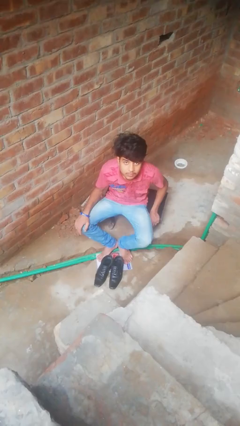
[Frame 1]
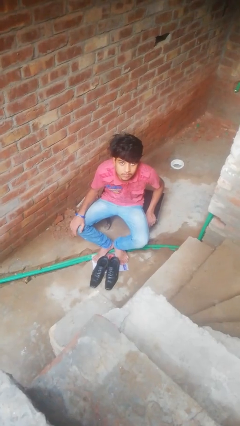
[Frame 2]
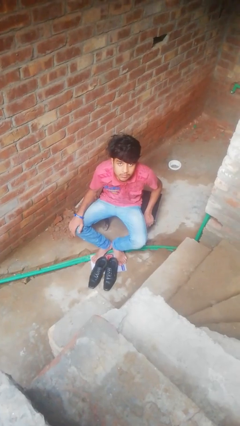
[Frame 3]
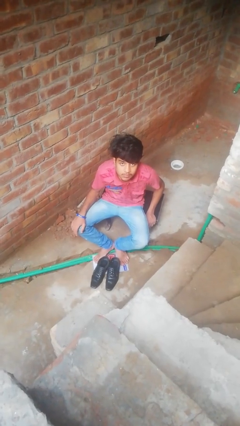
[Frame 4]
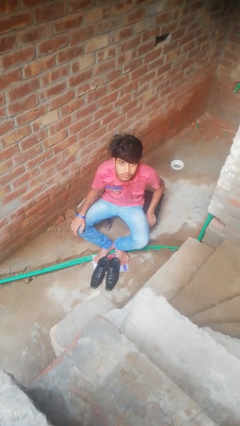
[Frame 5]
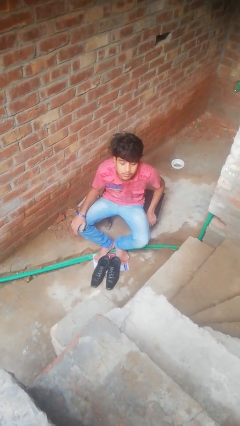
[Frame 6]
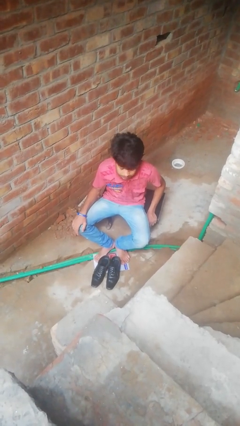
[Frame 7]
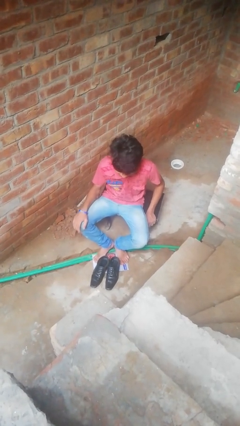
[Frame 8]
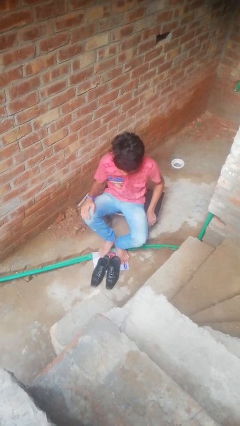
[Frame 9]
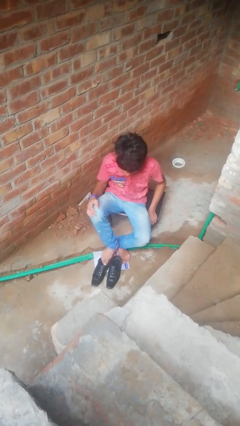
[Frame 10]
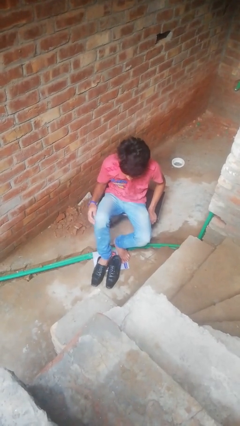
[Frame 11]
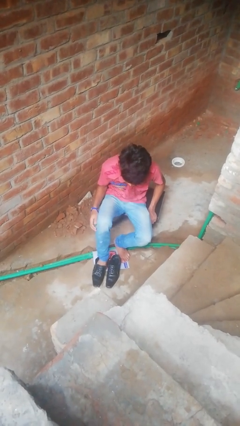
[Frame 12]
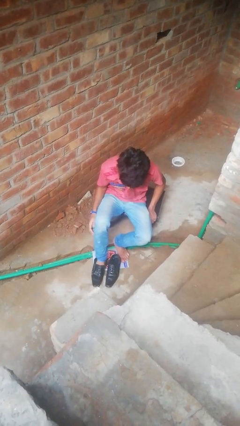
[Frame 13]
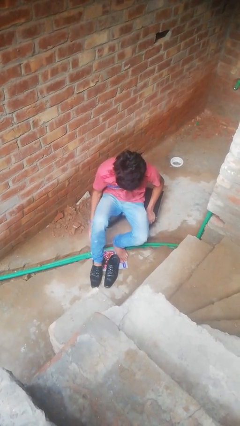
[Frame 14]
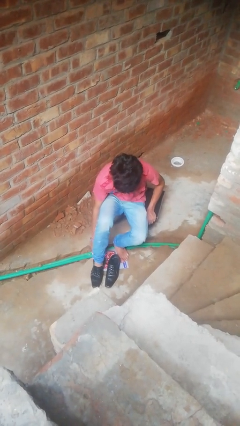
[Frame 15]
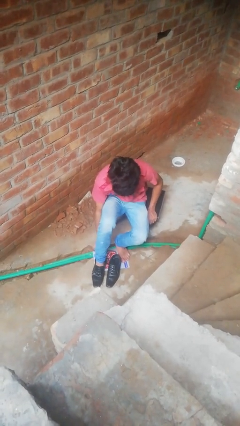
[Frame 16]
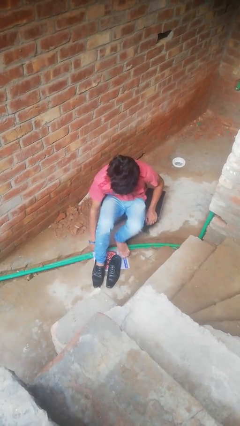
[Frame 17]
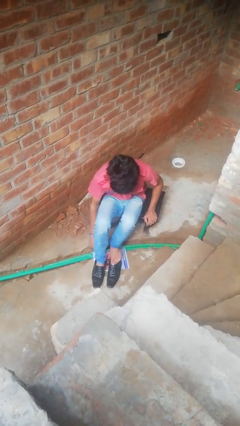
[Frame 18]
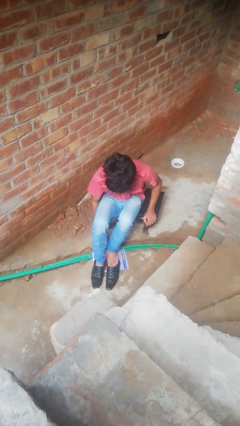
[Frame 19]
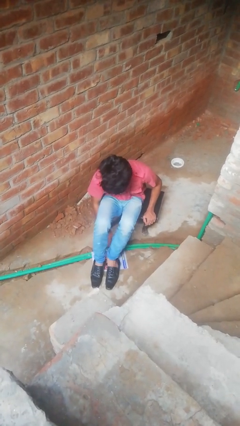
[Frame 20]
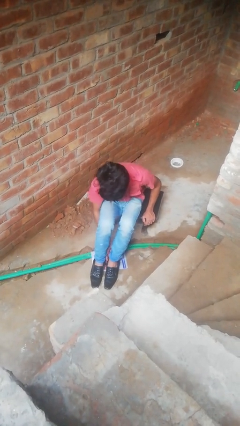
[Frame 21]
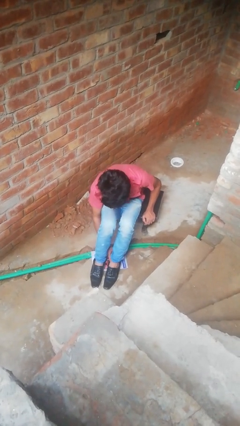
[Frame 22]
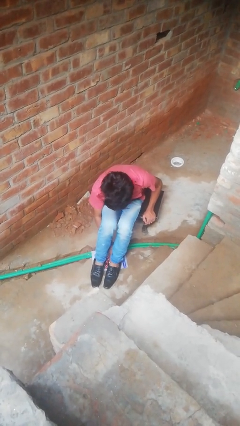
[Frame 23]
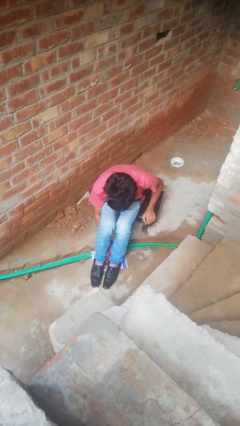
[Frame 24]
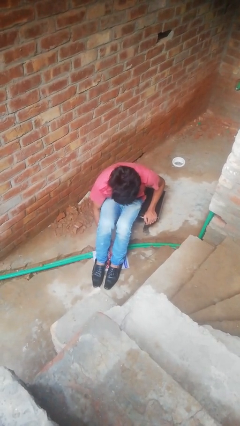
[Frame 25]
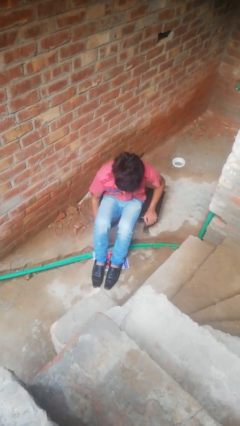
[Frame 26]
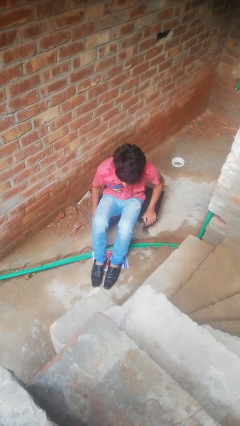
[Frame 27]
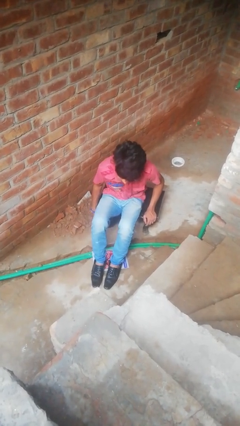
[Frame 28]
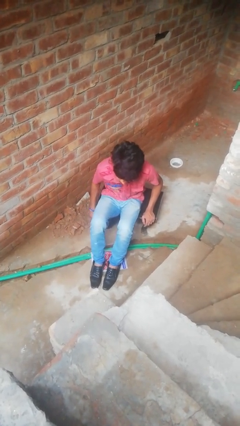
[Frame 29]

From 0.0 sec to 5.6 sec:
person puts on shoes

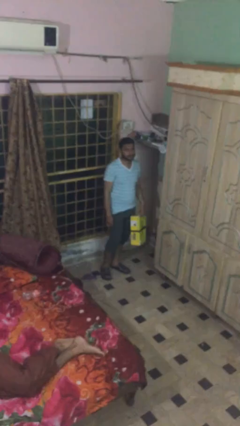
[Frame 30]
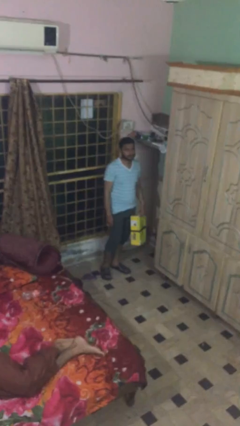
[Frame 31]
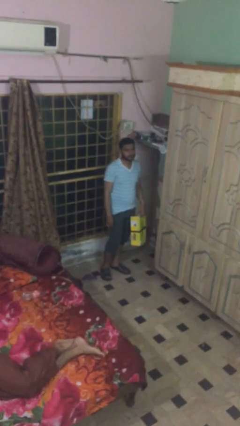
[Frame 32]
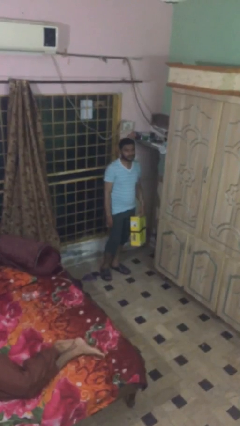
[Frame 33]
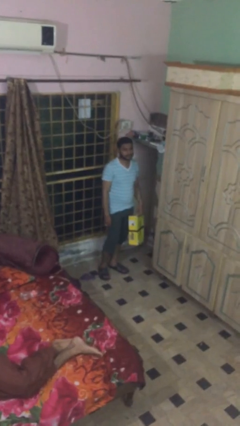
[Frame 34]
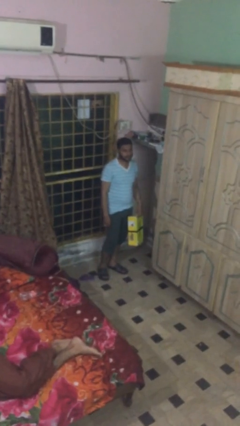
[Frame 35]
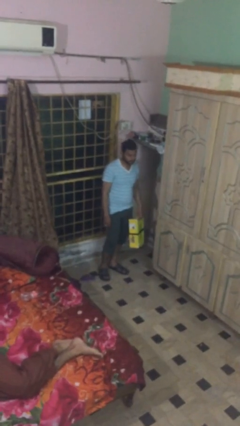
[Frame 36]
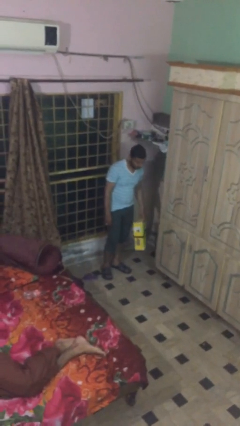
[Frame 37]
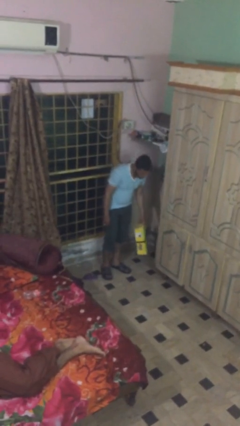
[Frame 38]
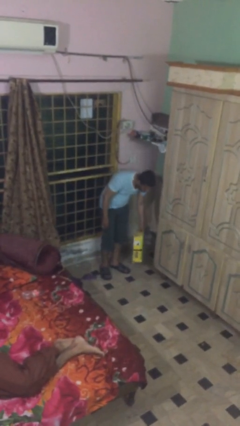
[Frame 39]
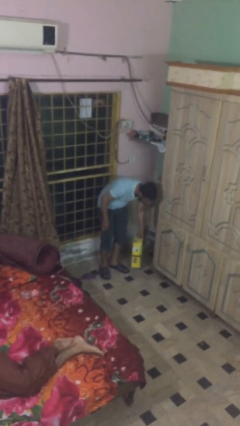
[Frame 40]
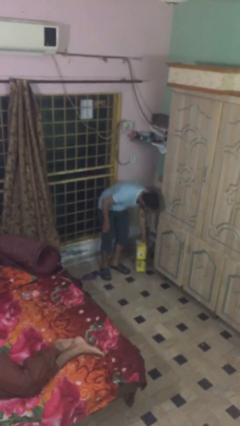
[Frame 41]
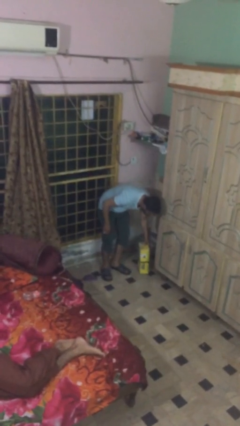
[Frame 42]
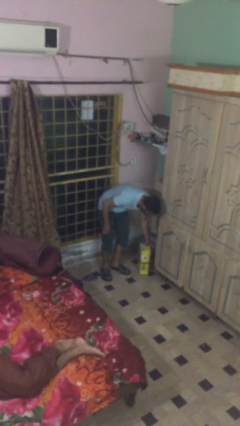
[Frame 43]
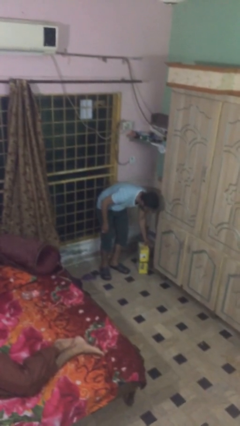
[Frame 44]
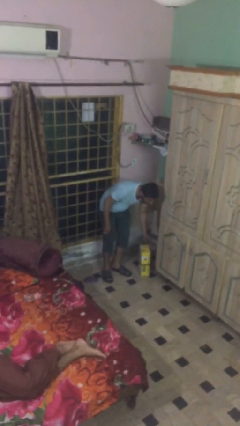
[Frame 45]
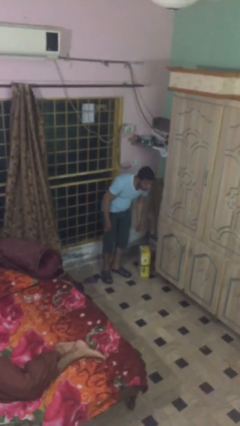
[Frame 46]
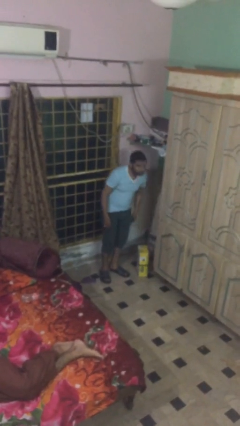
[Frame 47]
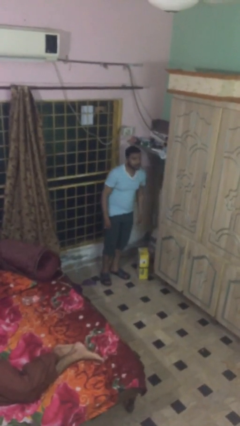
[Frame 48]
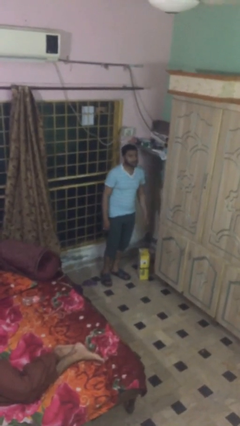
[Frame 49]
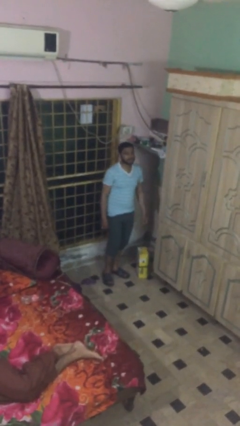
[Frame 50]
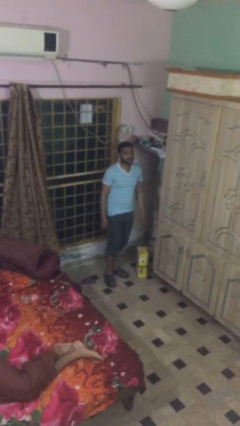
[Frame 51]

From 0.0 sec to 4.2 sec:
person puts down object on floor

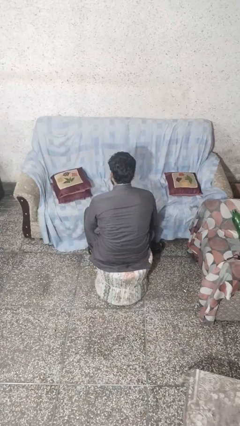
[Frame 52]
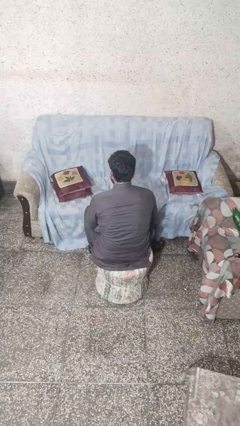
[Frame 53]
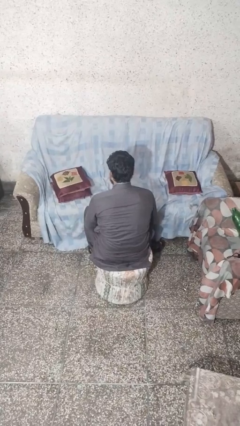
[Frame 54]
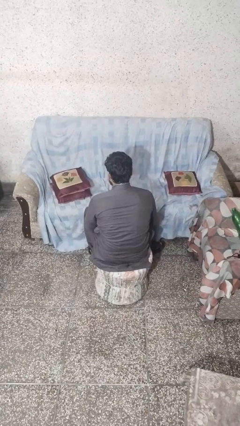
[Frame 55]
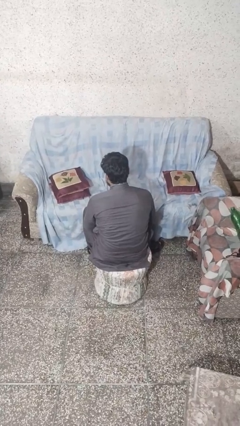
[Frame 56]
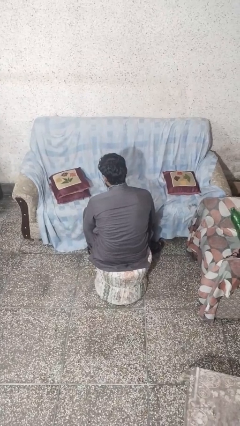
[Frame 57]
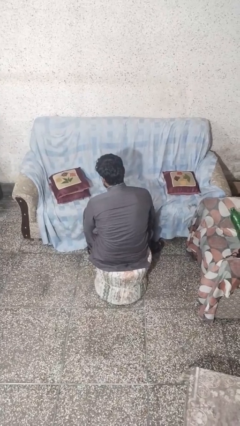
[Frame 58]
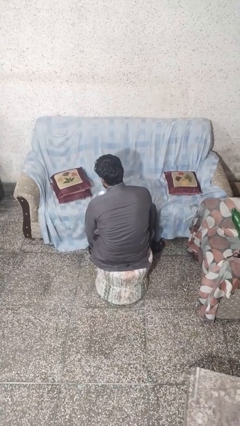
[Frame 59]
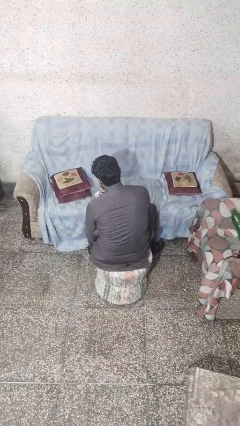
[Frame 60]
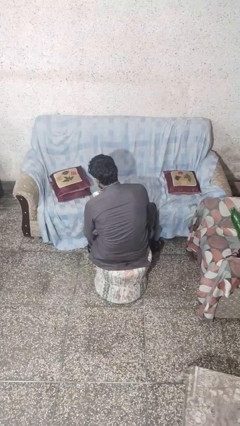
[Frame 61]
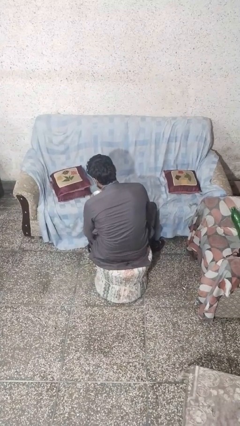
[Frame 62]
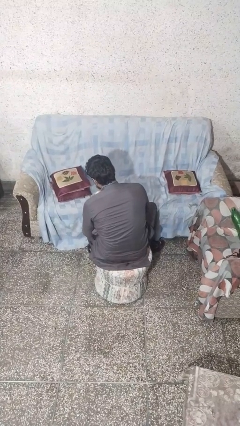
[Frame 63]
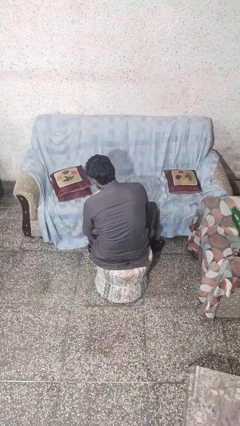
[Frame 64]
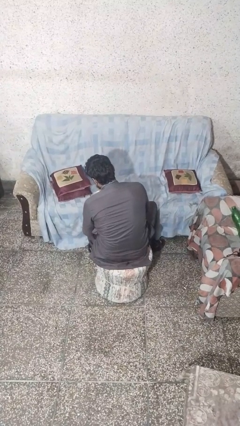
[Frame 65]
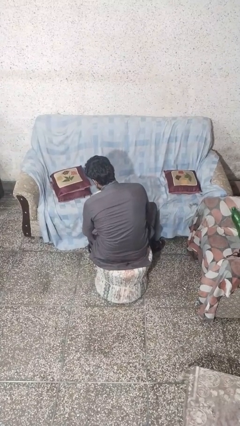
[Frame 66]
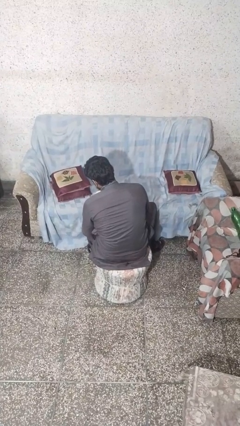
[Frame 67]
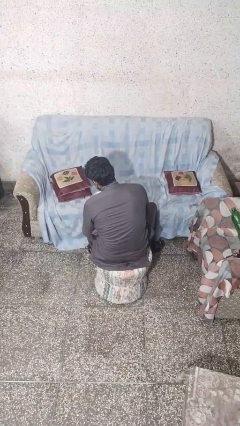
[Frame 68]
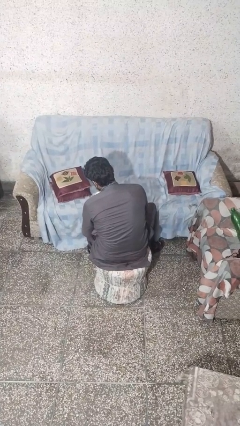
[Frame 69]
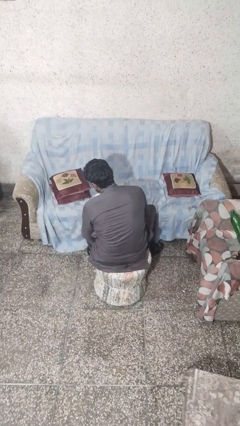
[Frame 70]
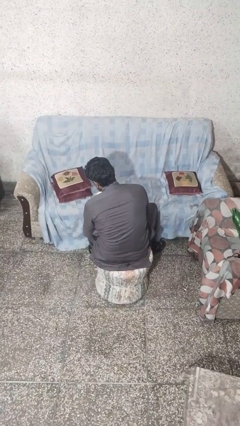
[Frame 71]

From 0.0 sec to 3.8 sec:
person stirs mug

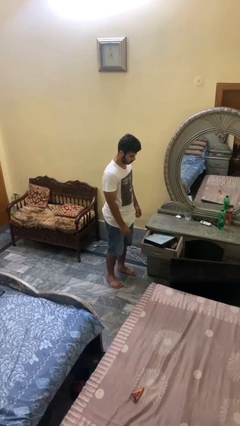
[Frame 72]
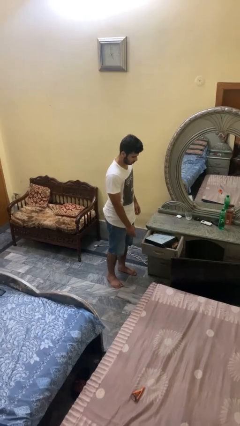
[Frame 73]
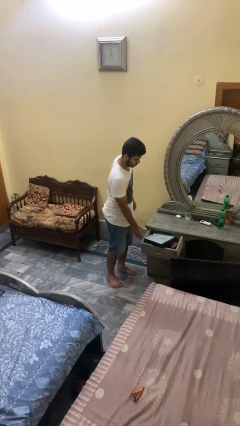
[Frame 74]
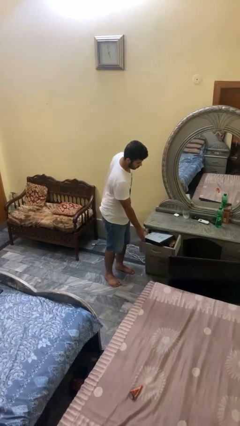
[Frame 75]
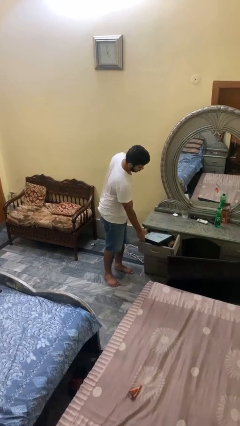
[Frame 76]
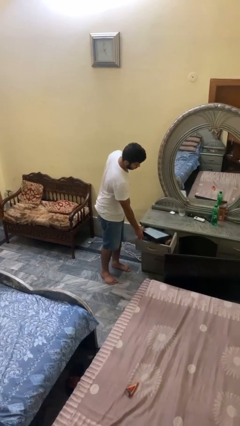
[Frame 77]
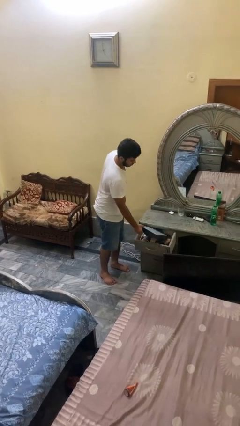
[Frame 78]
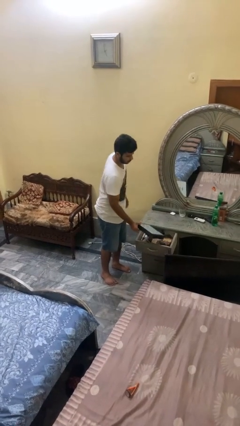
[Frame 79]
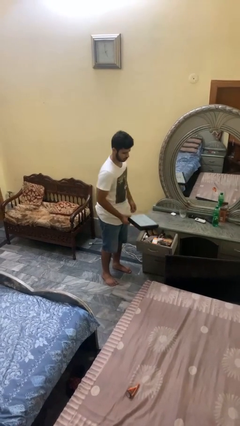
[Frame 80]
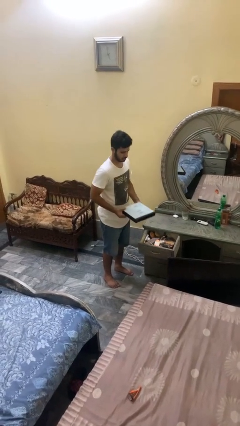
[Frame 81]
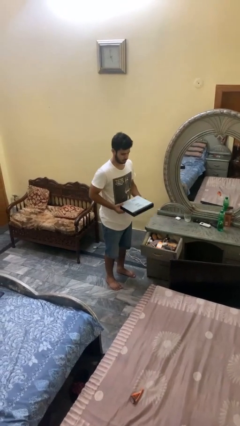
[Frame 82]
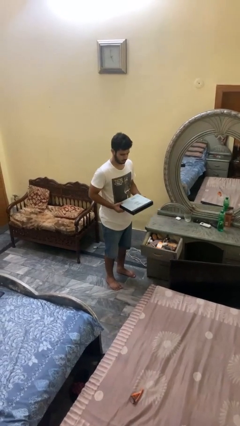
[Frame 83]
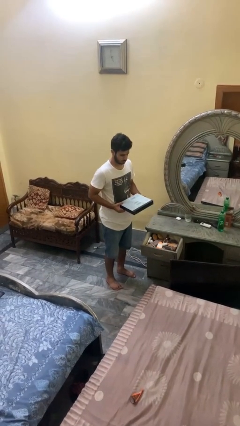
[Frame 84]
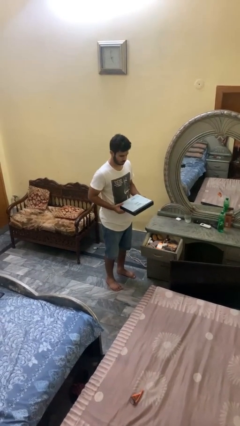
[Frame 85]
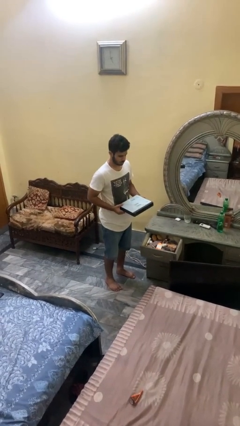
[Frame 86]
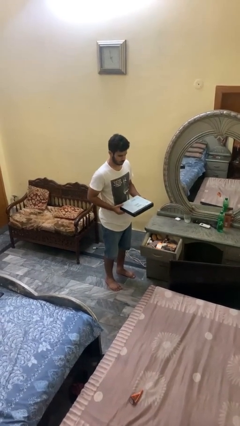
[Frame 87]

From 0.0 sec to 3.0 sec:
person picks up object from cabinet

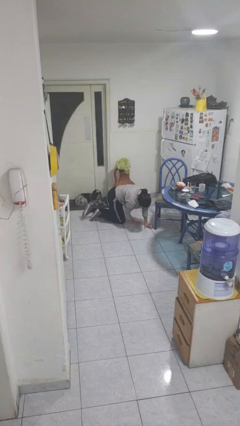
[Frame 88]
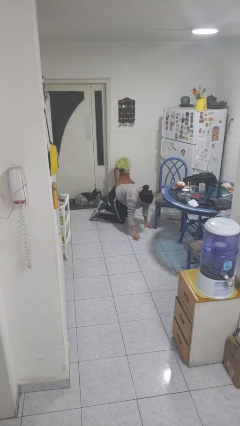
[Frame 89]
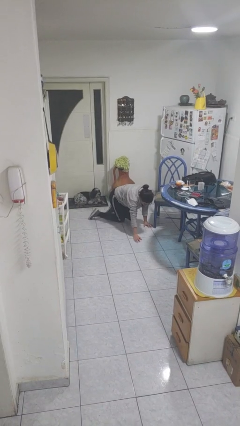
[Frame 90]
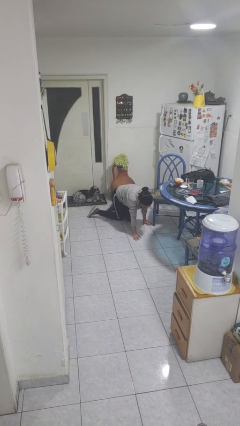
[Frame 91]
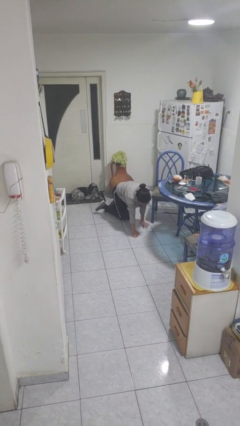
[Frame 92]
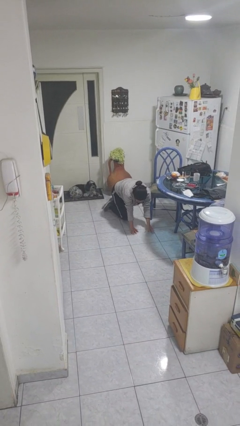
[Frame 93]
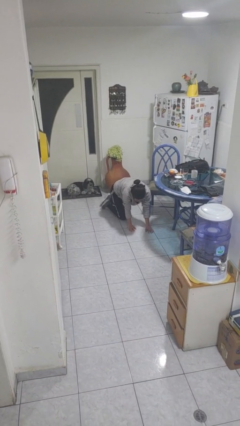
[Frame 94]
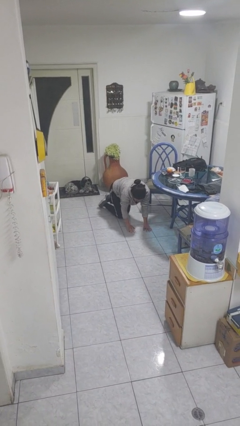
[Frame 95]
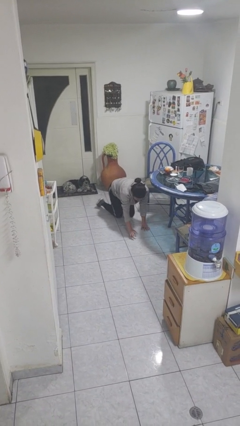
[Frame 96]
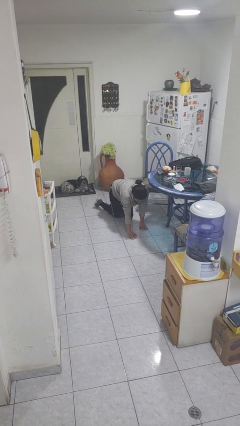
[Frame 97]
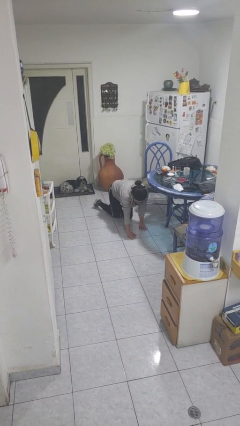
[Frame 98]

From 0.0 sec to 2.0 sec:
person crawls
